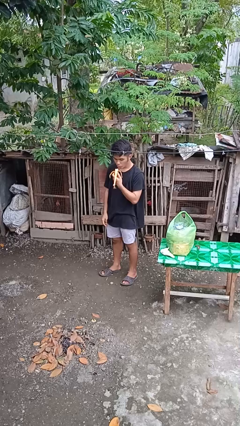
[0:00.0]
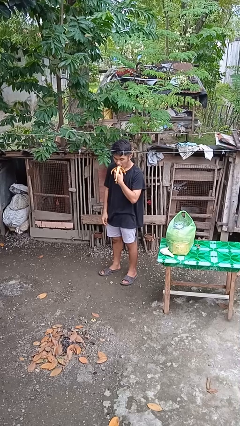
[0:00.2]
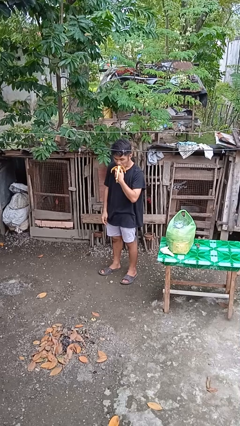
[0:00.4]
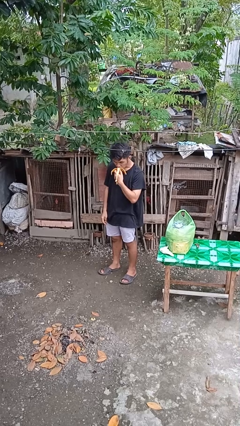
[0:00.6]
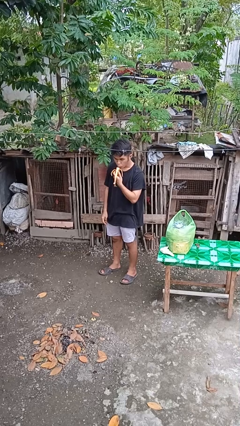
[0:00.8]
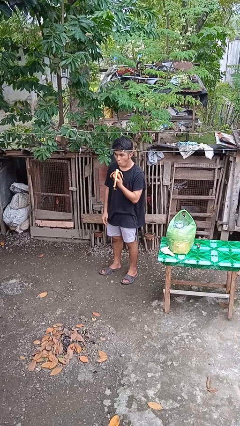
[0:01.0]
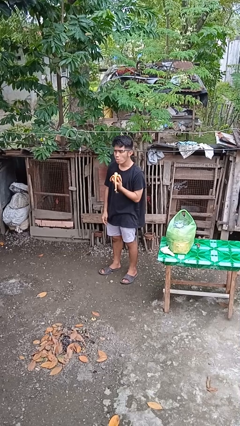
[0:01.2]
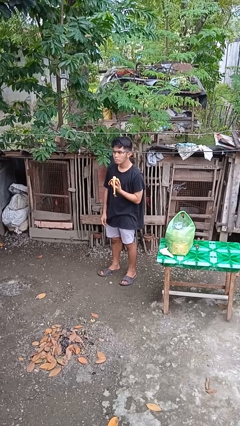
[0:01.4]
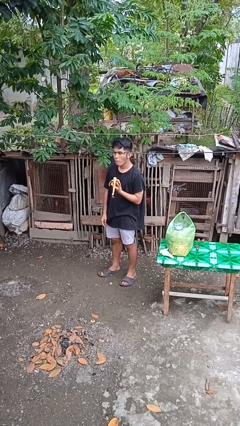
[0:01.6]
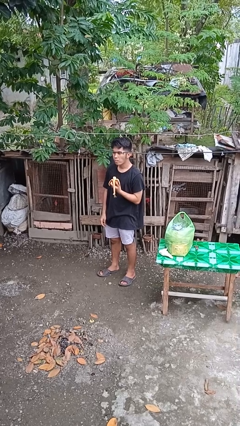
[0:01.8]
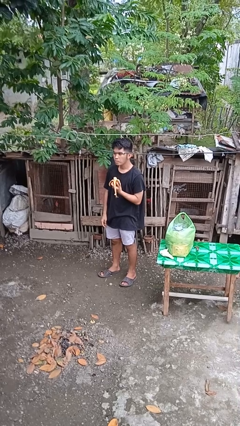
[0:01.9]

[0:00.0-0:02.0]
person eats banana

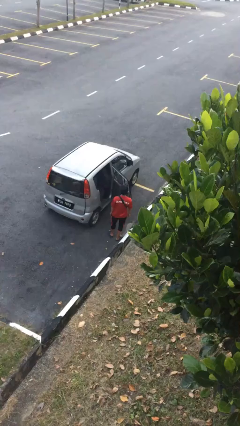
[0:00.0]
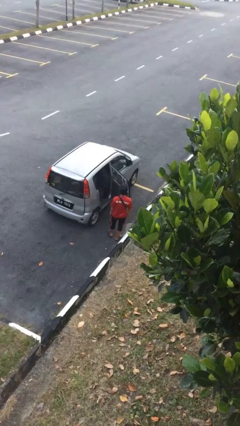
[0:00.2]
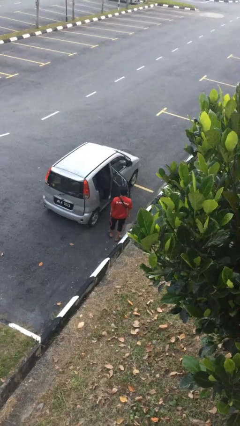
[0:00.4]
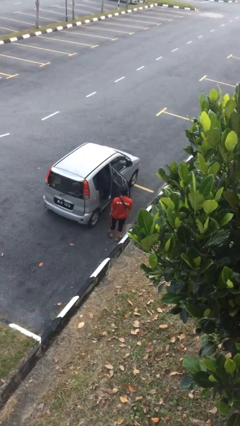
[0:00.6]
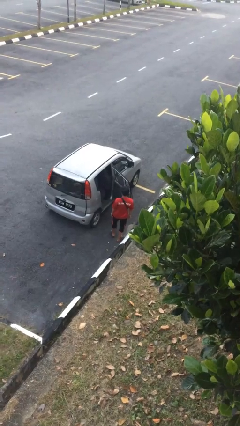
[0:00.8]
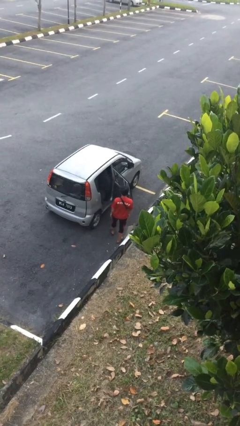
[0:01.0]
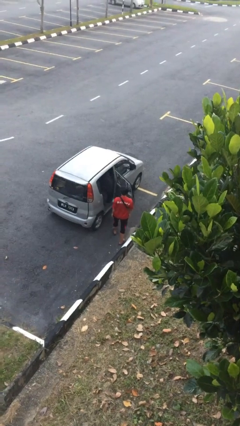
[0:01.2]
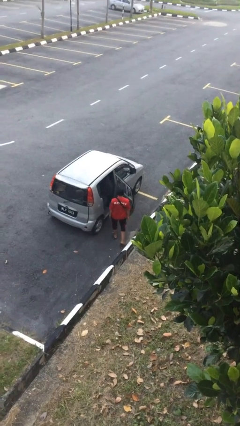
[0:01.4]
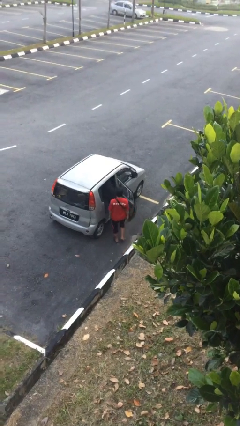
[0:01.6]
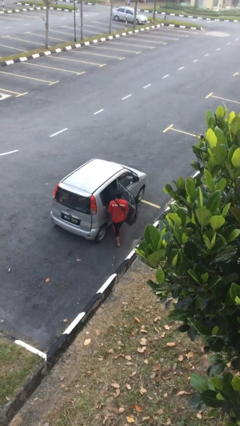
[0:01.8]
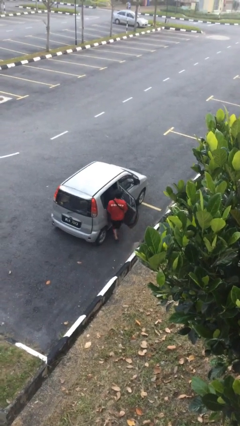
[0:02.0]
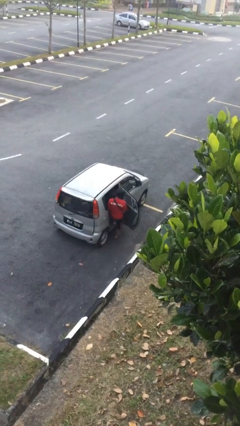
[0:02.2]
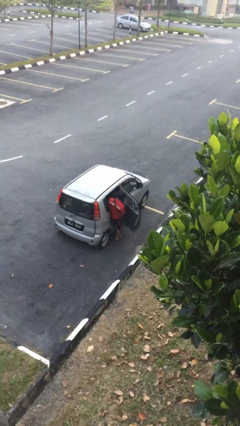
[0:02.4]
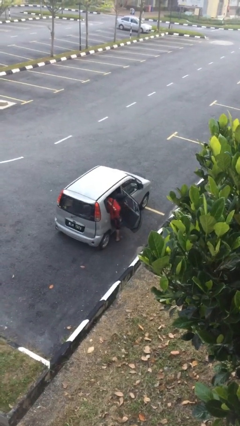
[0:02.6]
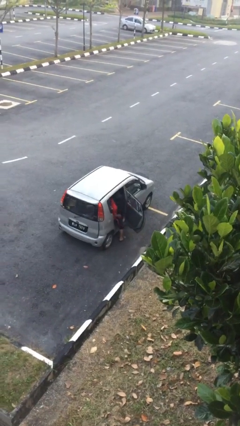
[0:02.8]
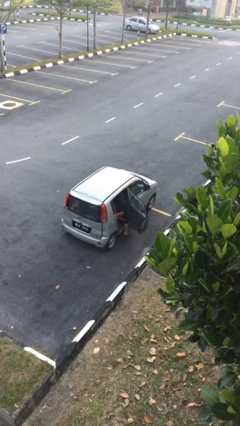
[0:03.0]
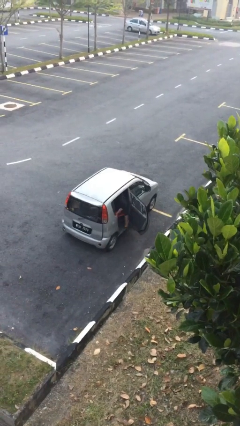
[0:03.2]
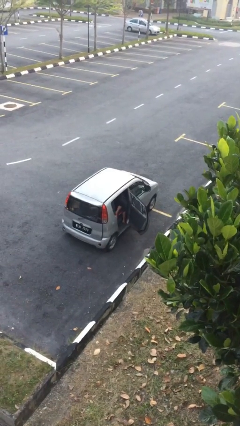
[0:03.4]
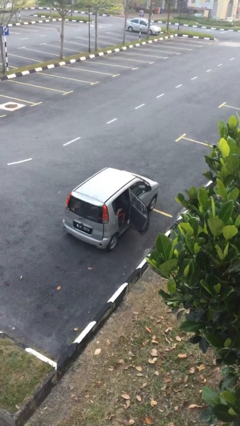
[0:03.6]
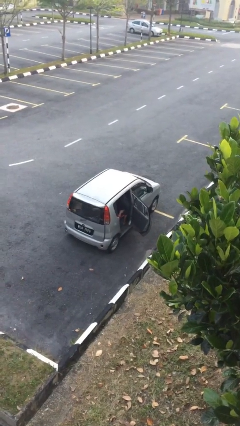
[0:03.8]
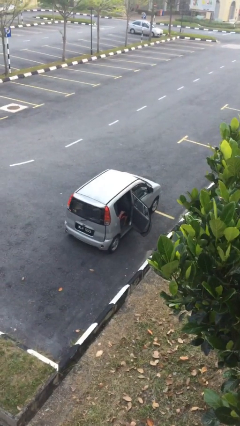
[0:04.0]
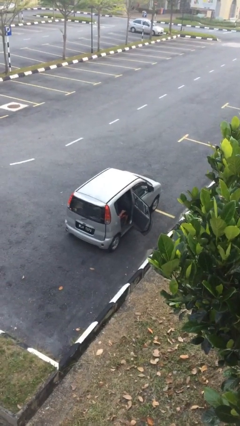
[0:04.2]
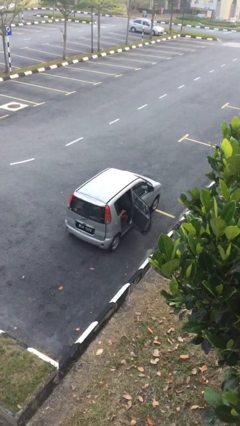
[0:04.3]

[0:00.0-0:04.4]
person enters car

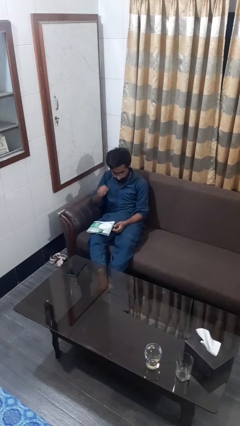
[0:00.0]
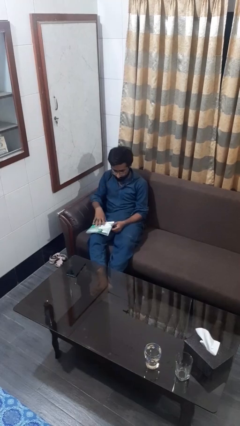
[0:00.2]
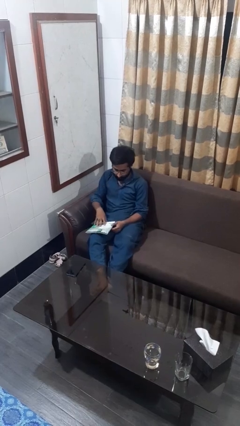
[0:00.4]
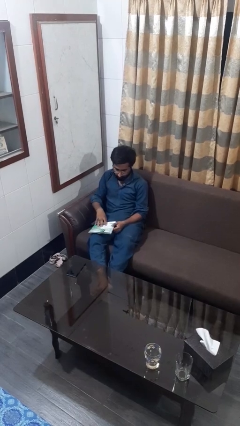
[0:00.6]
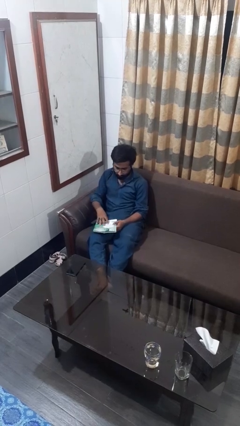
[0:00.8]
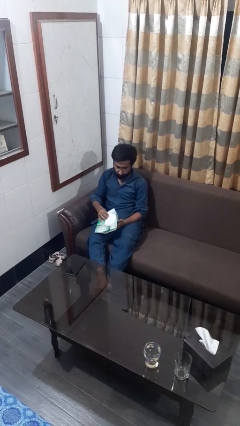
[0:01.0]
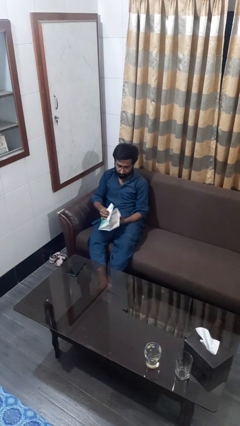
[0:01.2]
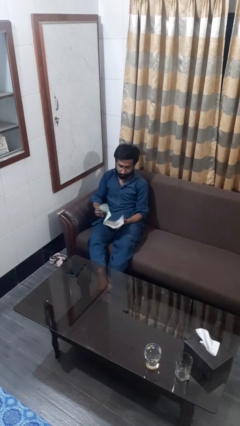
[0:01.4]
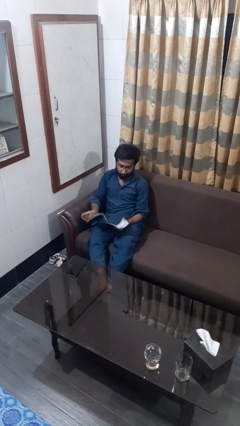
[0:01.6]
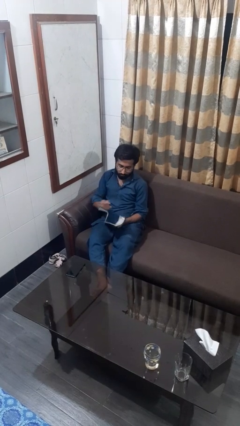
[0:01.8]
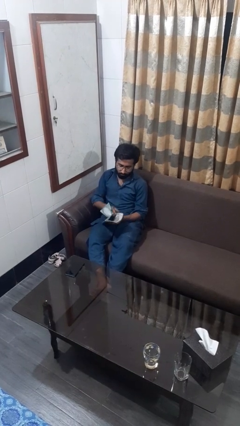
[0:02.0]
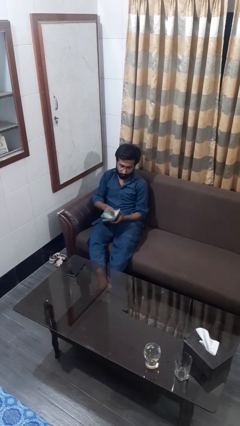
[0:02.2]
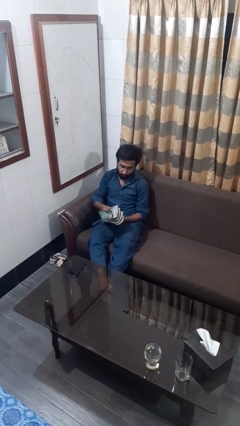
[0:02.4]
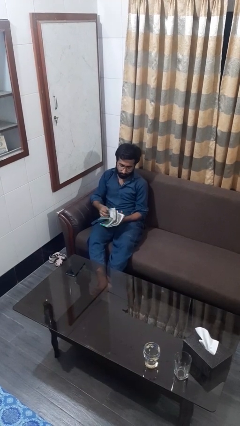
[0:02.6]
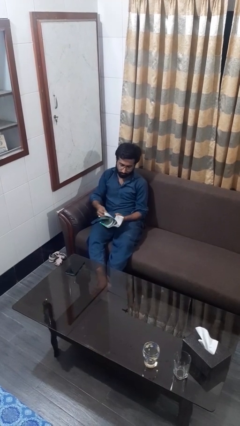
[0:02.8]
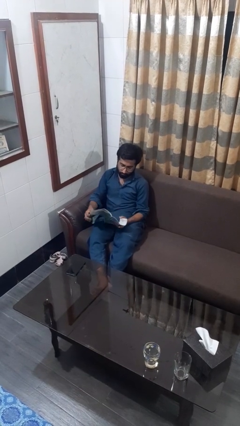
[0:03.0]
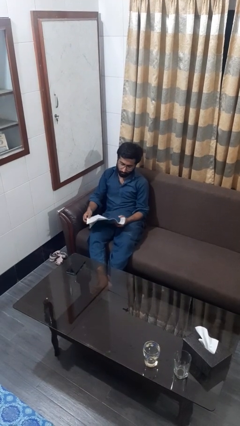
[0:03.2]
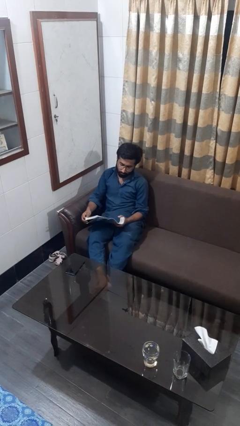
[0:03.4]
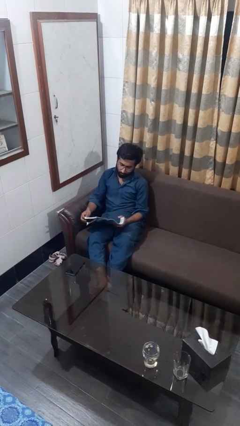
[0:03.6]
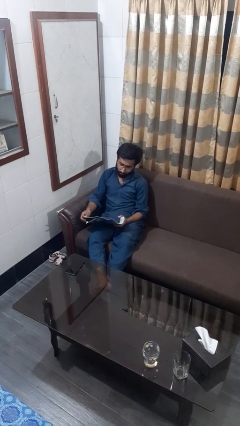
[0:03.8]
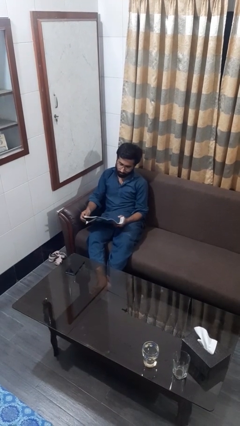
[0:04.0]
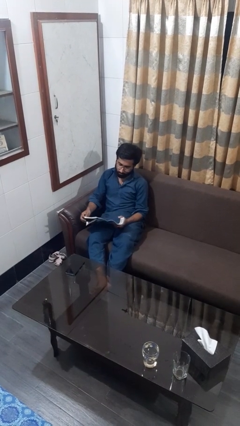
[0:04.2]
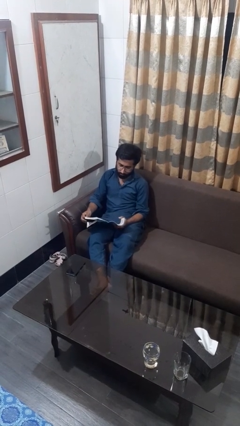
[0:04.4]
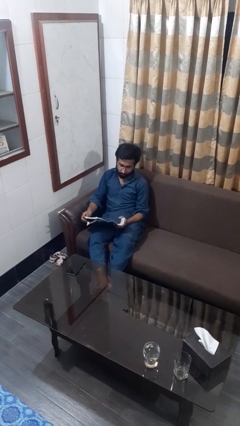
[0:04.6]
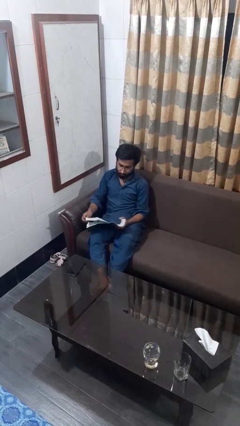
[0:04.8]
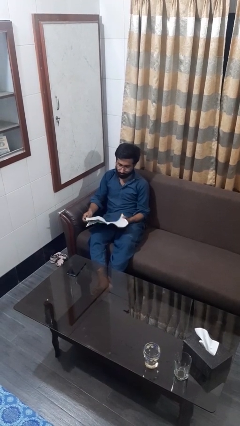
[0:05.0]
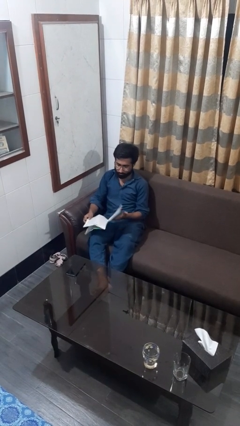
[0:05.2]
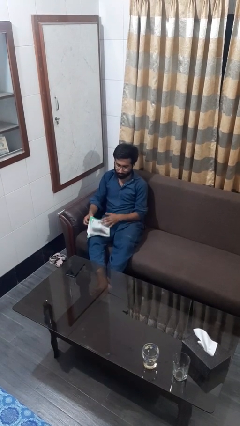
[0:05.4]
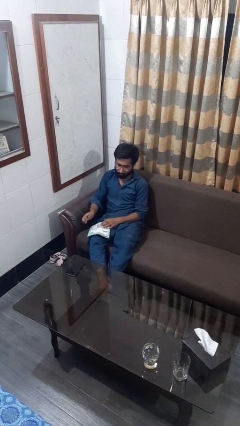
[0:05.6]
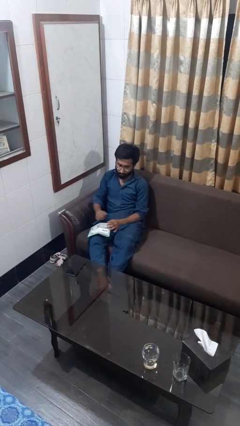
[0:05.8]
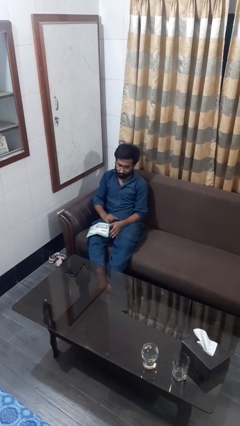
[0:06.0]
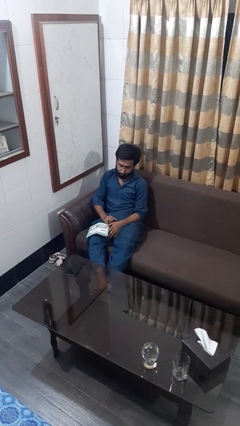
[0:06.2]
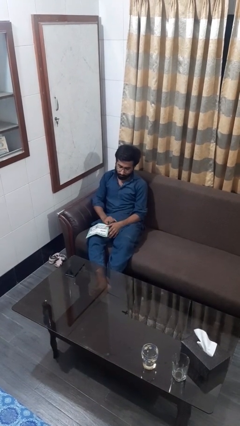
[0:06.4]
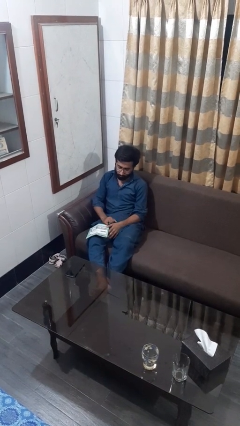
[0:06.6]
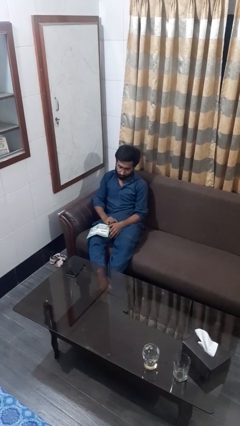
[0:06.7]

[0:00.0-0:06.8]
person reads magazine

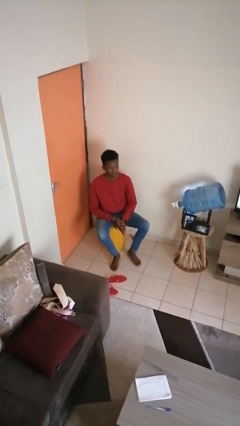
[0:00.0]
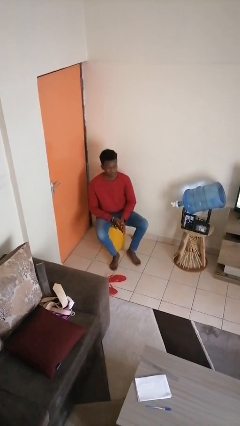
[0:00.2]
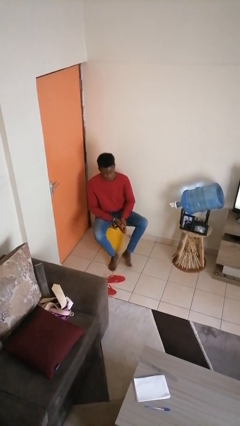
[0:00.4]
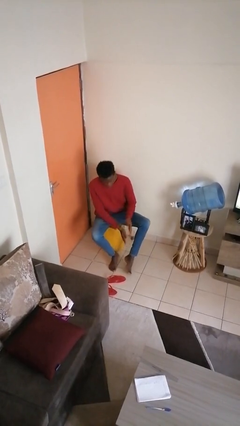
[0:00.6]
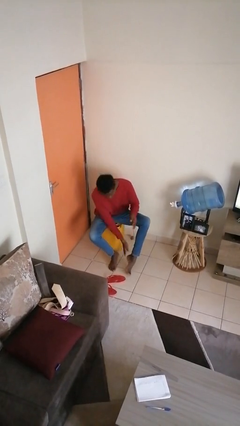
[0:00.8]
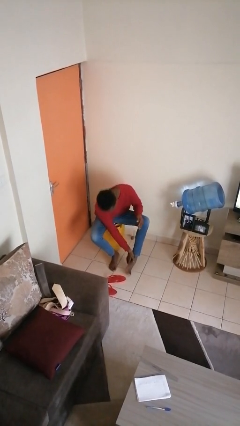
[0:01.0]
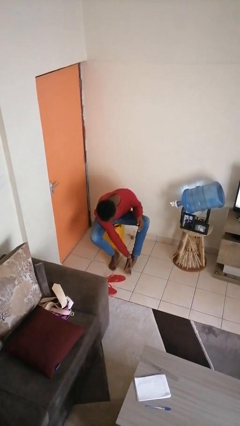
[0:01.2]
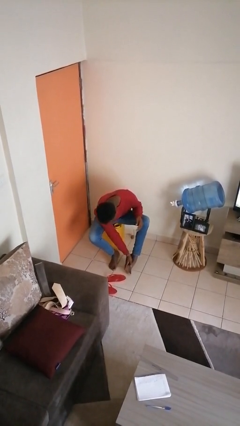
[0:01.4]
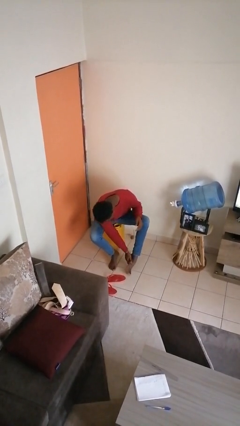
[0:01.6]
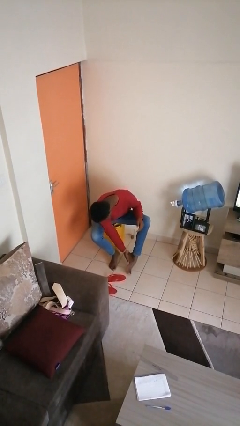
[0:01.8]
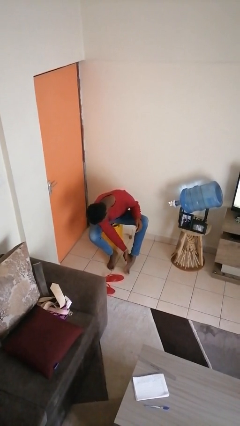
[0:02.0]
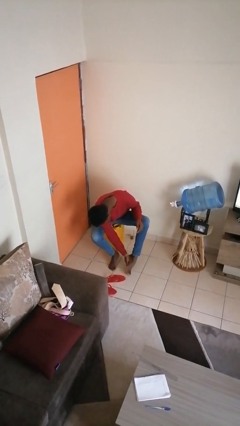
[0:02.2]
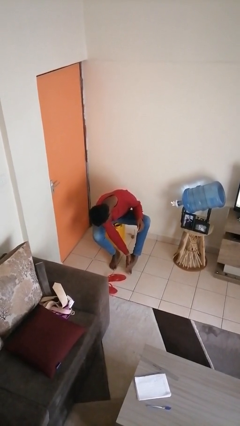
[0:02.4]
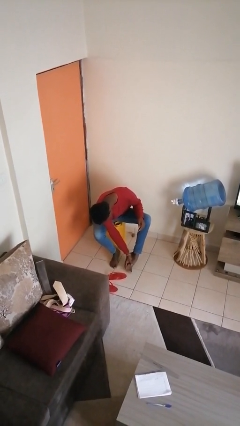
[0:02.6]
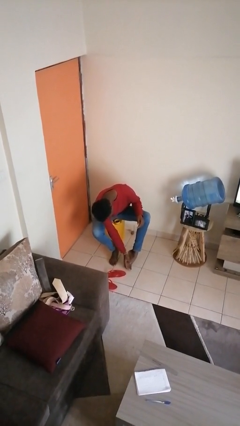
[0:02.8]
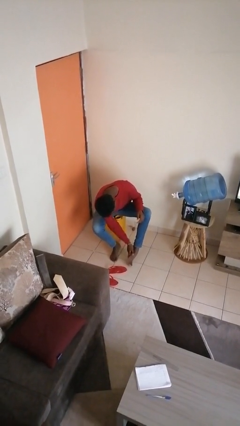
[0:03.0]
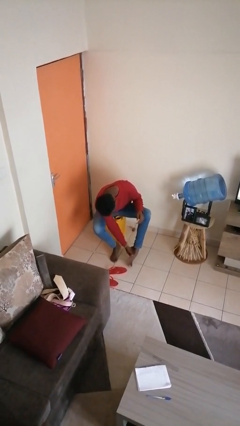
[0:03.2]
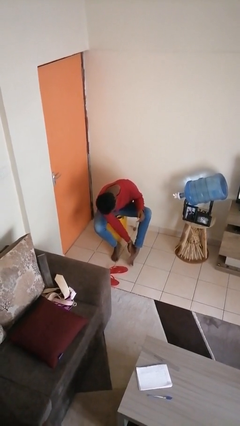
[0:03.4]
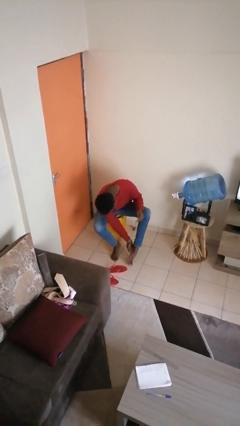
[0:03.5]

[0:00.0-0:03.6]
person rubs foot

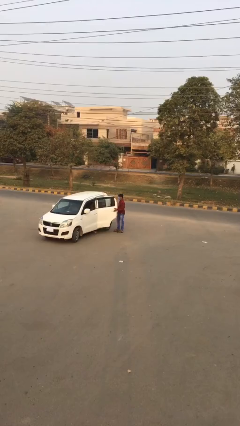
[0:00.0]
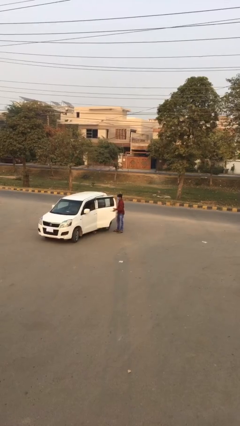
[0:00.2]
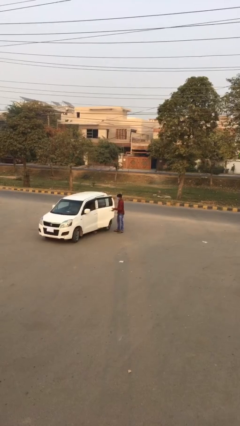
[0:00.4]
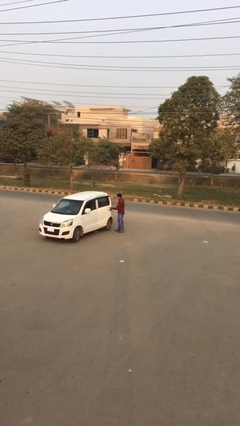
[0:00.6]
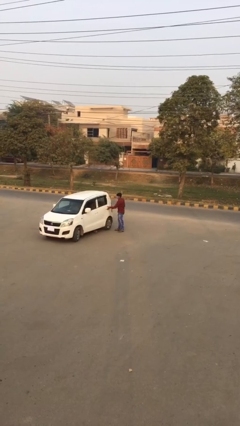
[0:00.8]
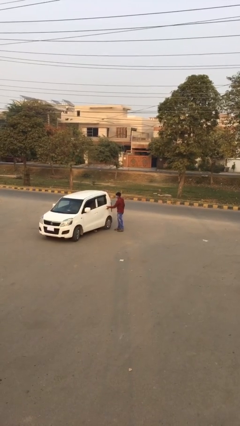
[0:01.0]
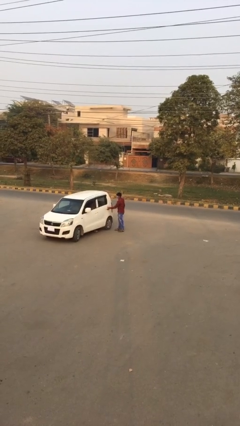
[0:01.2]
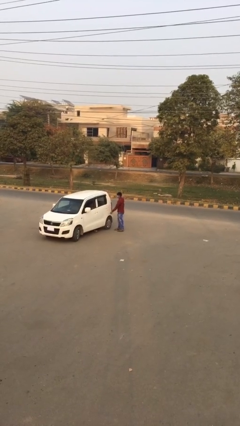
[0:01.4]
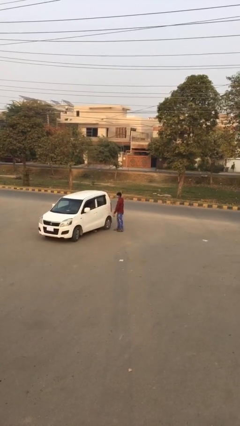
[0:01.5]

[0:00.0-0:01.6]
person closes car door
